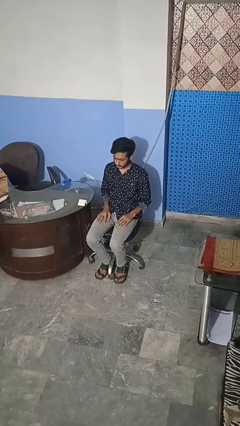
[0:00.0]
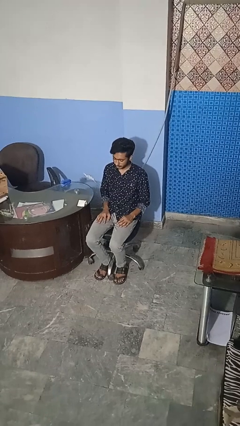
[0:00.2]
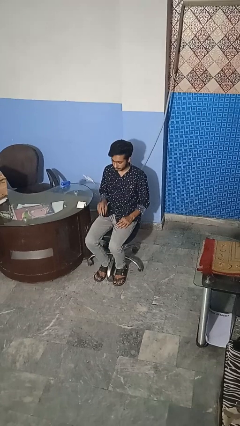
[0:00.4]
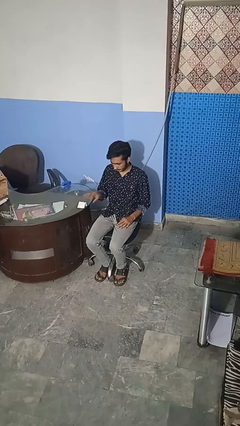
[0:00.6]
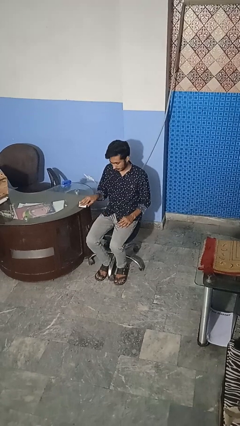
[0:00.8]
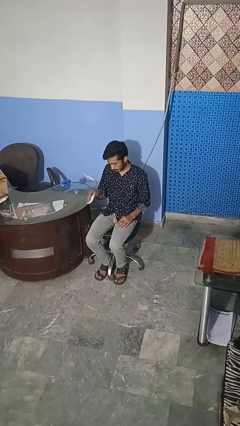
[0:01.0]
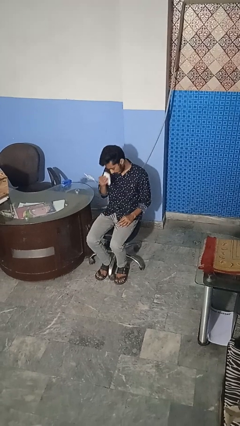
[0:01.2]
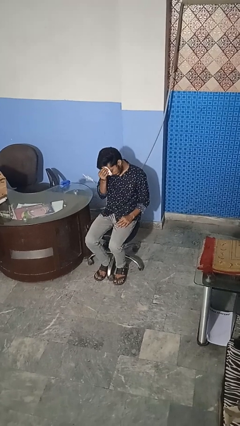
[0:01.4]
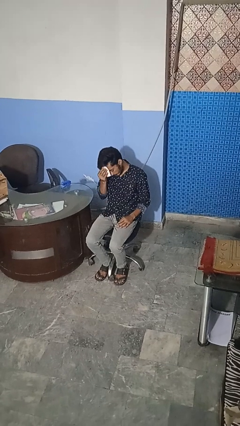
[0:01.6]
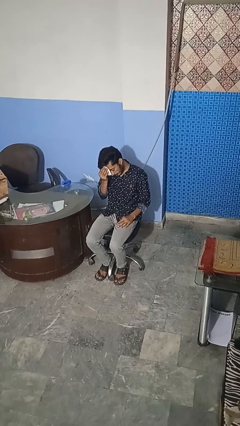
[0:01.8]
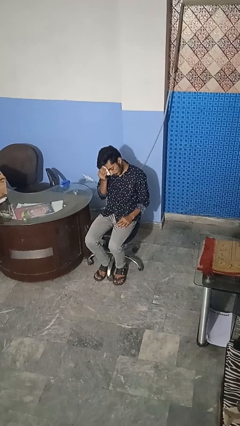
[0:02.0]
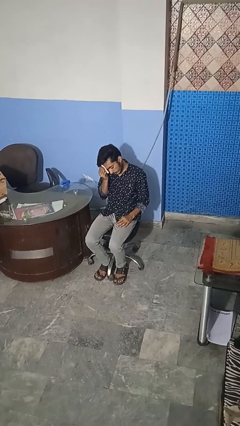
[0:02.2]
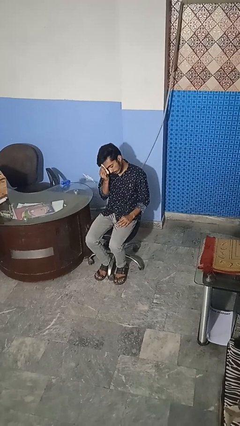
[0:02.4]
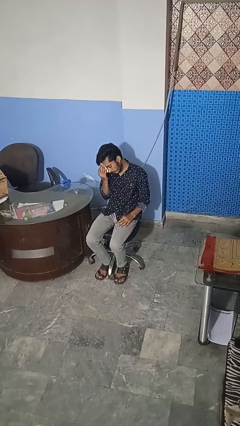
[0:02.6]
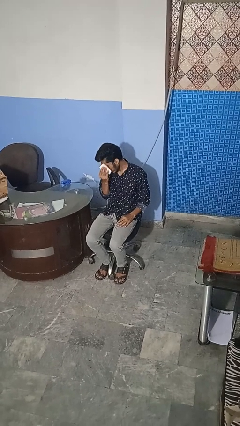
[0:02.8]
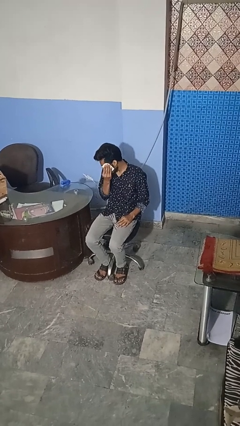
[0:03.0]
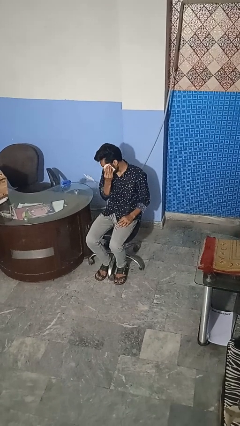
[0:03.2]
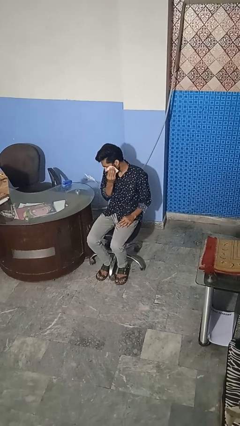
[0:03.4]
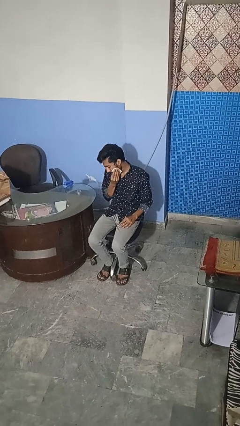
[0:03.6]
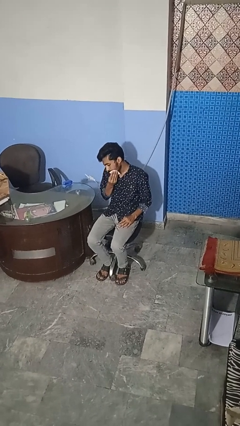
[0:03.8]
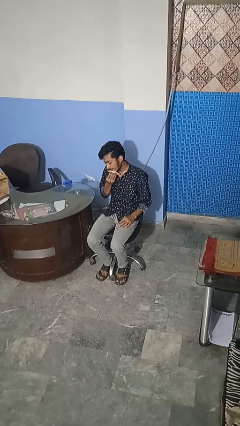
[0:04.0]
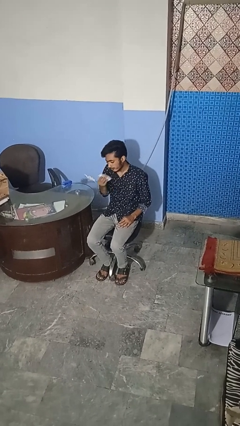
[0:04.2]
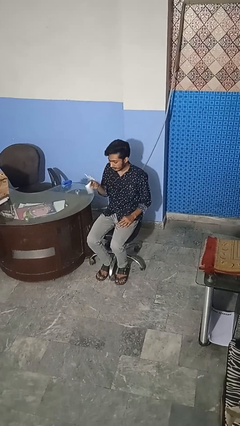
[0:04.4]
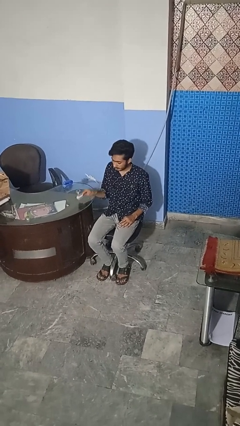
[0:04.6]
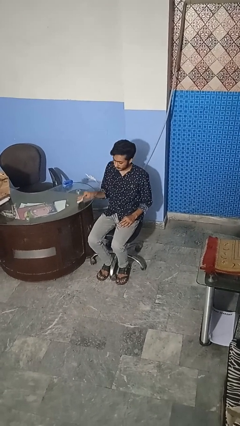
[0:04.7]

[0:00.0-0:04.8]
person wipes mouth with napkin

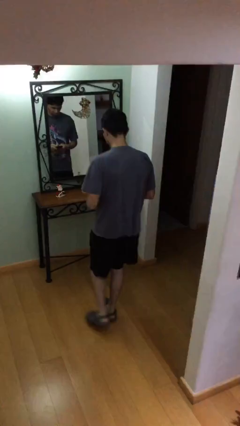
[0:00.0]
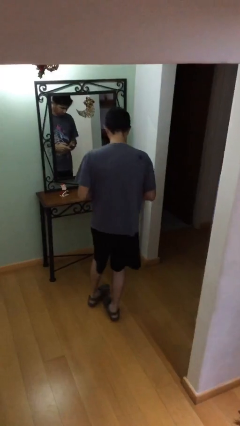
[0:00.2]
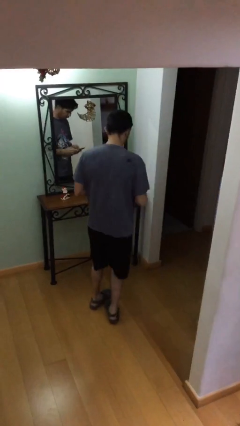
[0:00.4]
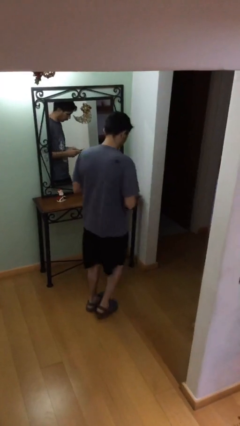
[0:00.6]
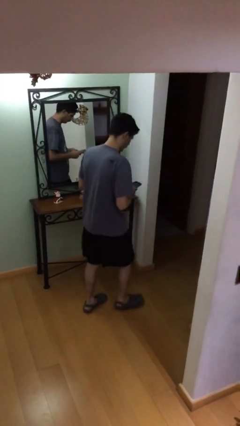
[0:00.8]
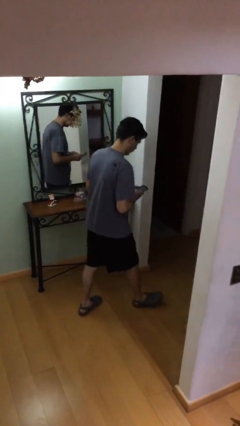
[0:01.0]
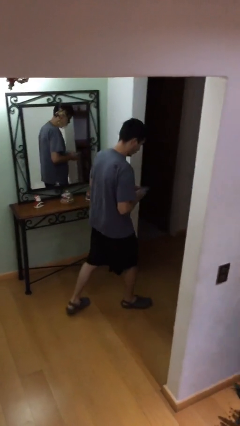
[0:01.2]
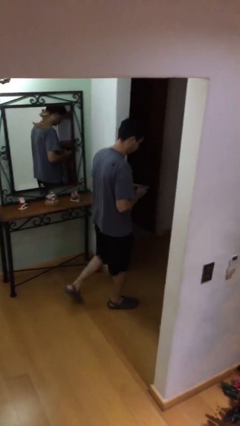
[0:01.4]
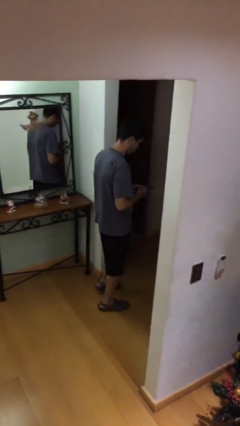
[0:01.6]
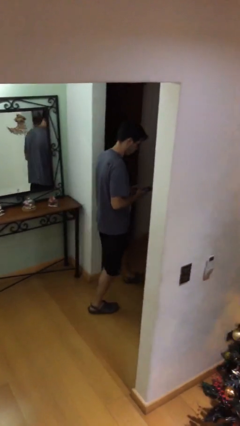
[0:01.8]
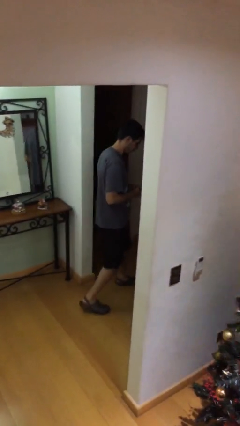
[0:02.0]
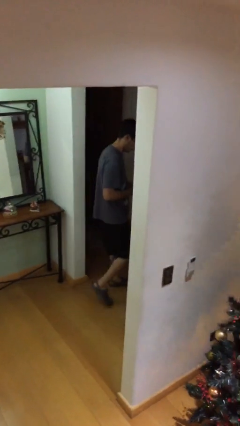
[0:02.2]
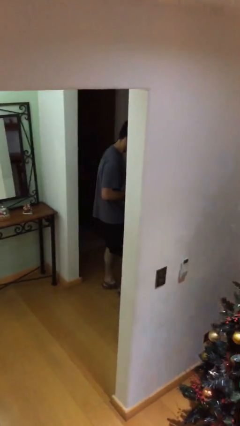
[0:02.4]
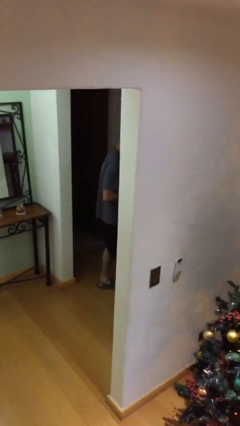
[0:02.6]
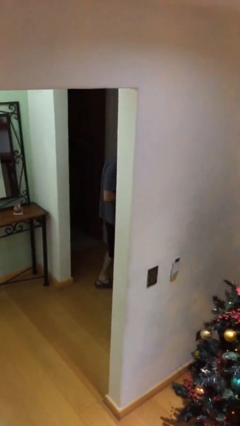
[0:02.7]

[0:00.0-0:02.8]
person exits scene through structure

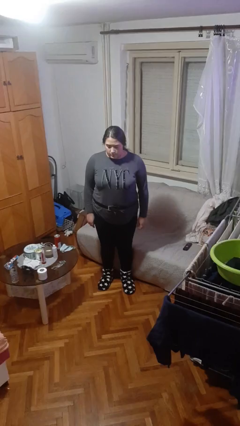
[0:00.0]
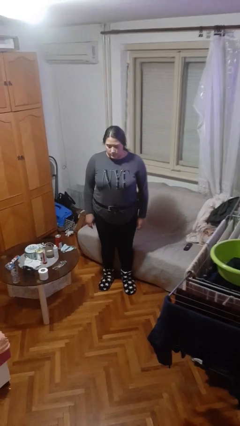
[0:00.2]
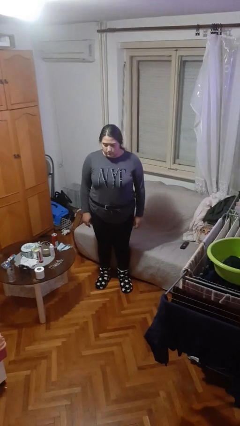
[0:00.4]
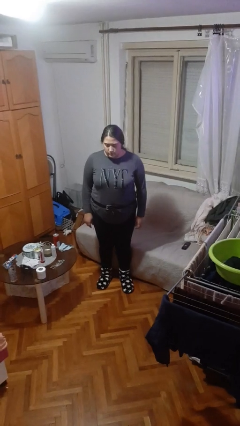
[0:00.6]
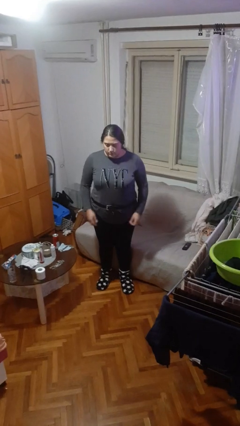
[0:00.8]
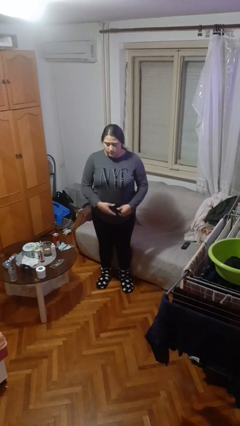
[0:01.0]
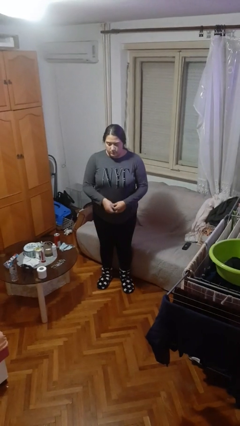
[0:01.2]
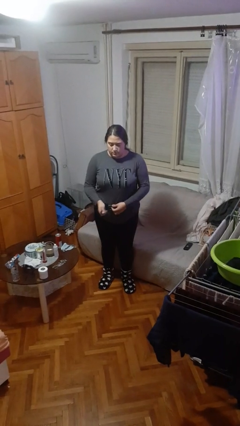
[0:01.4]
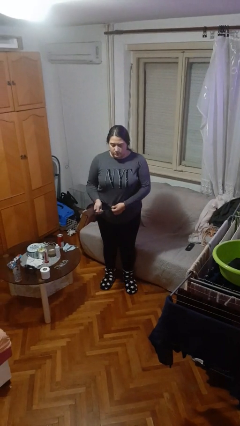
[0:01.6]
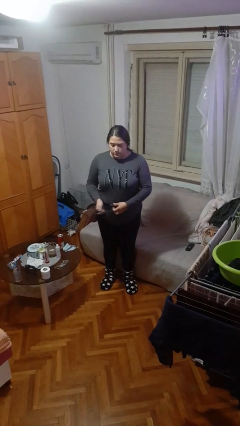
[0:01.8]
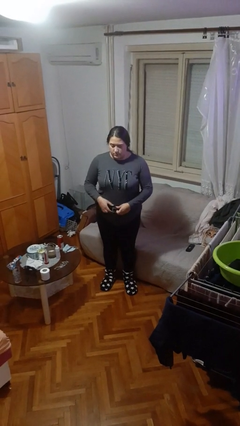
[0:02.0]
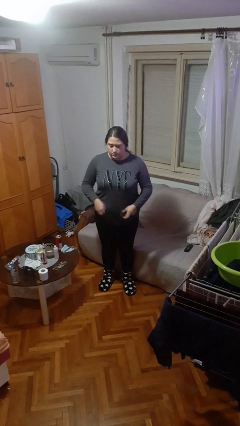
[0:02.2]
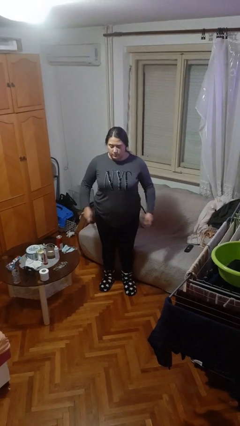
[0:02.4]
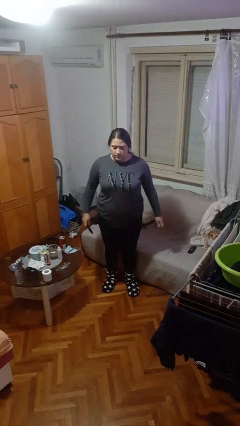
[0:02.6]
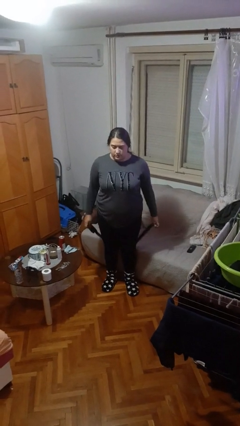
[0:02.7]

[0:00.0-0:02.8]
person takes off belt

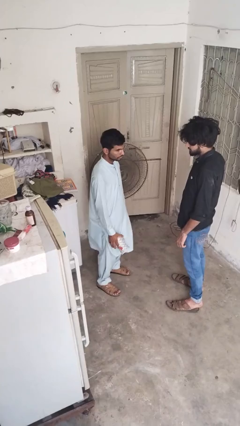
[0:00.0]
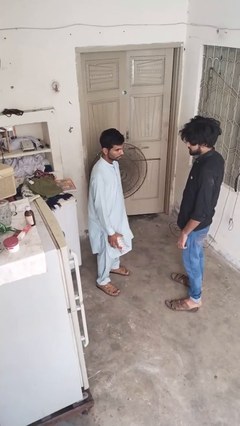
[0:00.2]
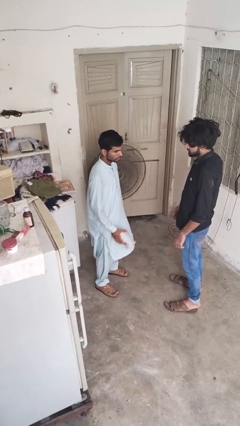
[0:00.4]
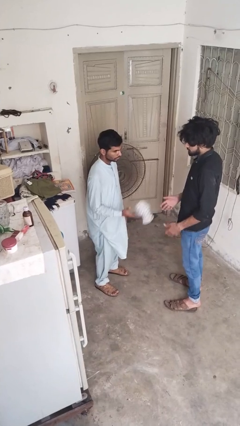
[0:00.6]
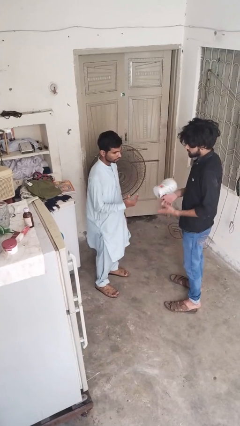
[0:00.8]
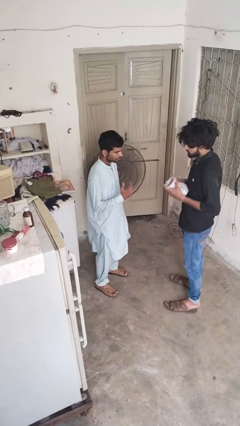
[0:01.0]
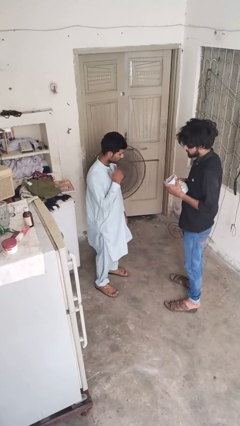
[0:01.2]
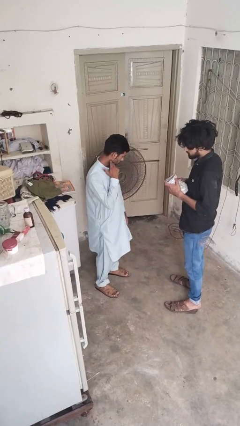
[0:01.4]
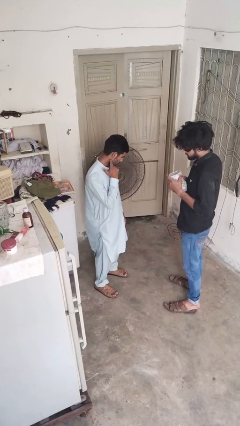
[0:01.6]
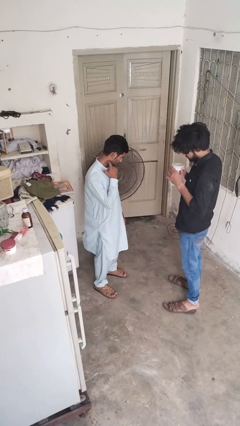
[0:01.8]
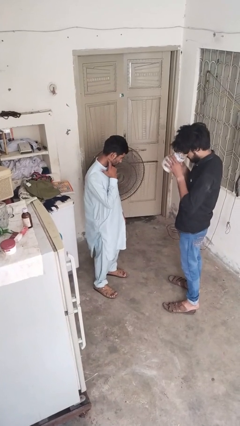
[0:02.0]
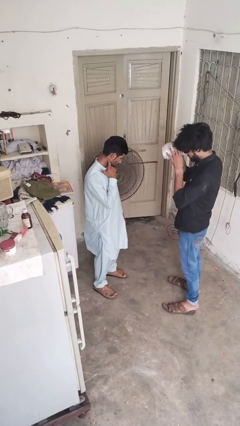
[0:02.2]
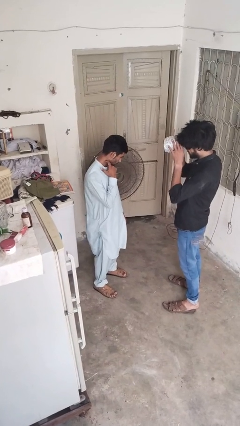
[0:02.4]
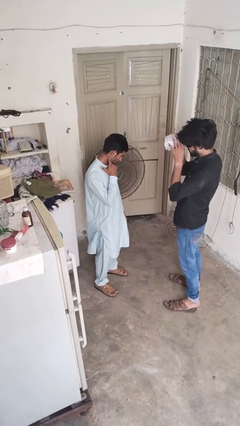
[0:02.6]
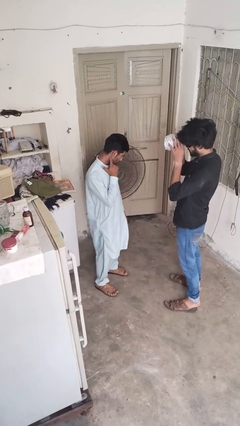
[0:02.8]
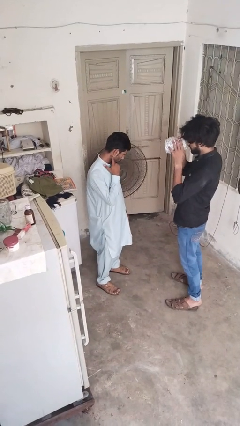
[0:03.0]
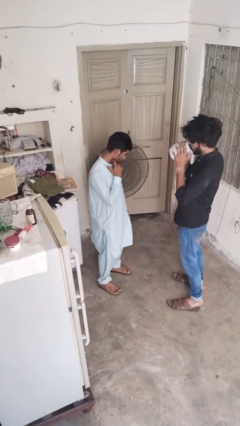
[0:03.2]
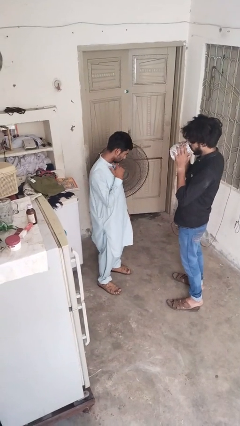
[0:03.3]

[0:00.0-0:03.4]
person throws object to person

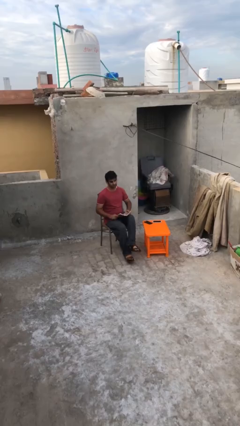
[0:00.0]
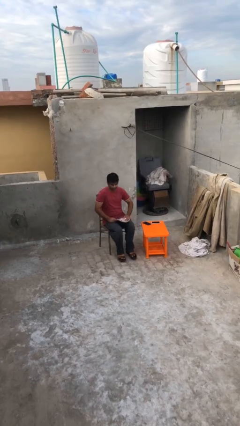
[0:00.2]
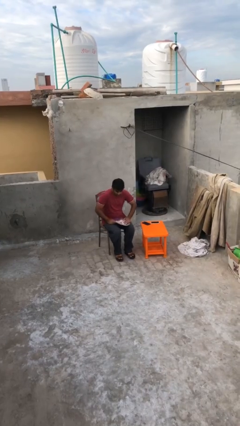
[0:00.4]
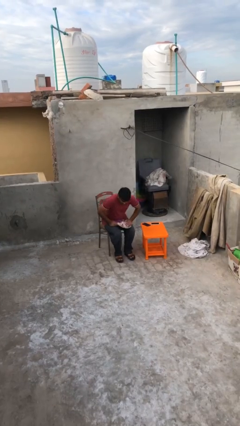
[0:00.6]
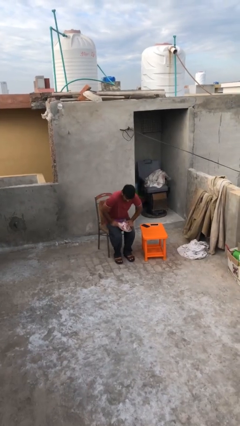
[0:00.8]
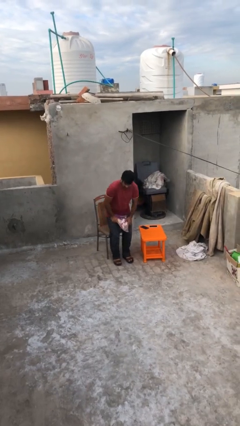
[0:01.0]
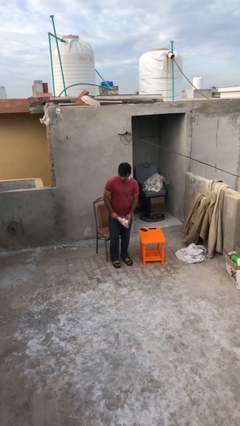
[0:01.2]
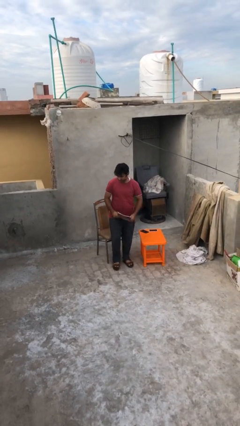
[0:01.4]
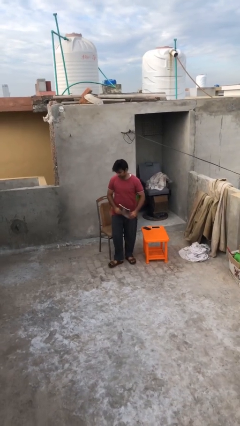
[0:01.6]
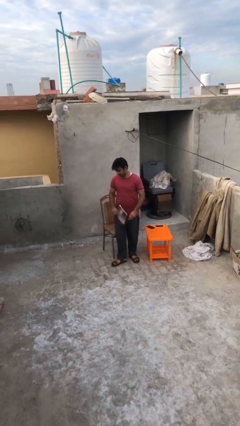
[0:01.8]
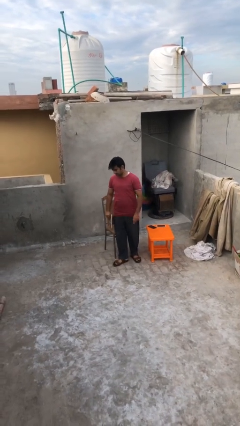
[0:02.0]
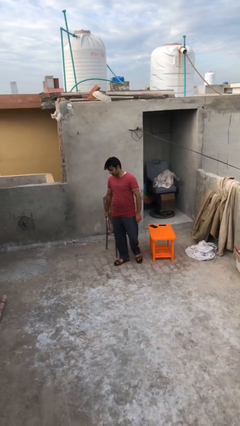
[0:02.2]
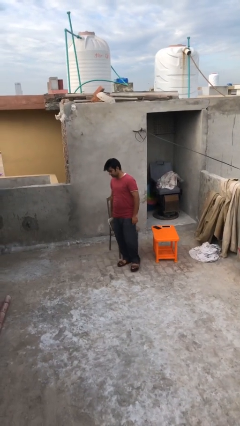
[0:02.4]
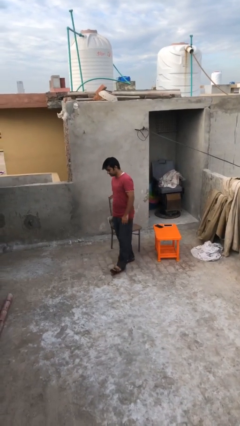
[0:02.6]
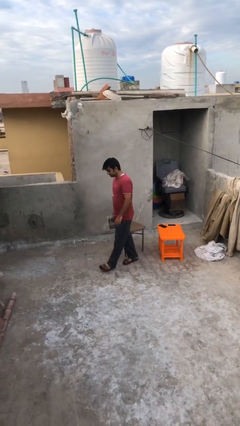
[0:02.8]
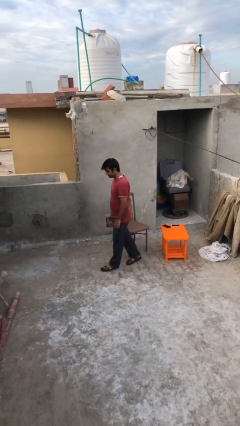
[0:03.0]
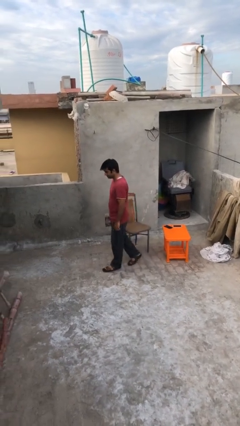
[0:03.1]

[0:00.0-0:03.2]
person stands up

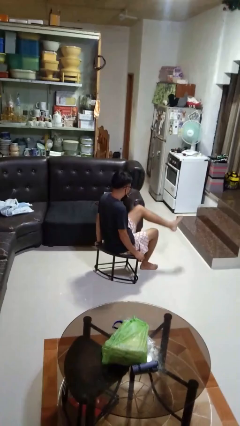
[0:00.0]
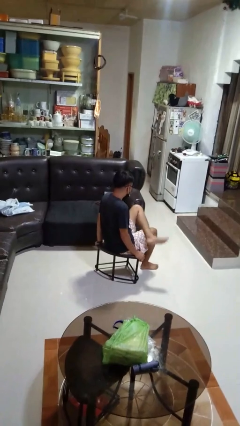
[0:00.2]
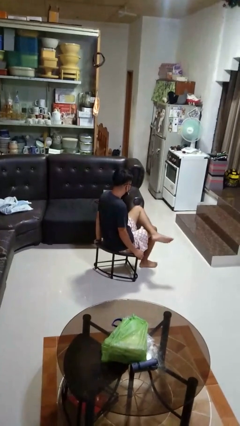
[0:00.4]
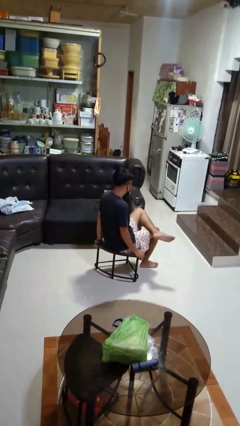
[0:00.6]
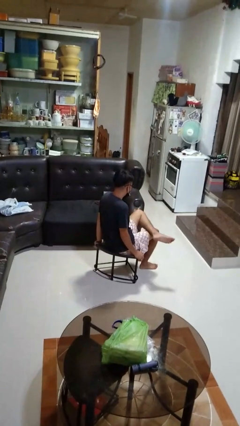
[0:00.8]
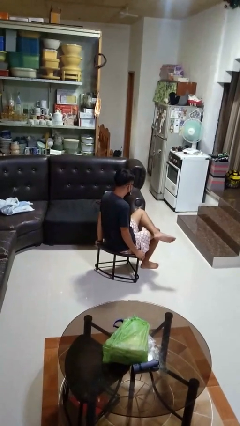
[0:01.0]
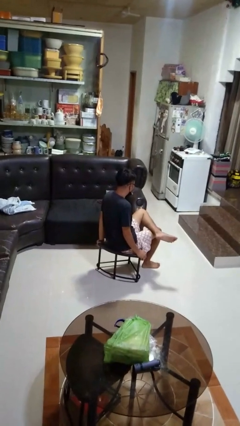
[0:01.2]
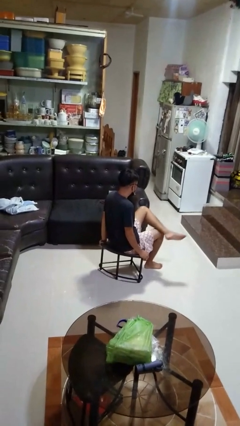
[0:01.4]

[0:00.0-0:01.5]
person crosses legs
